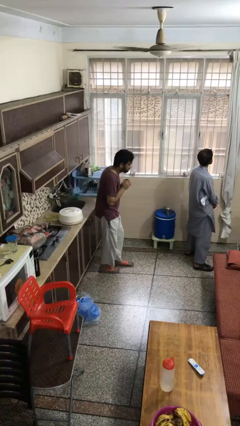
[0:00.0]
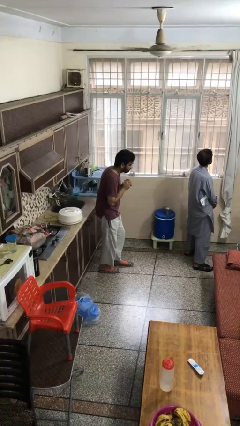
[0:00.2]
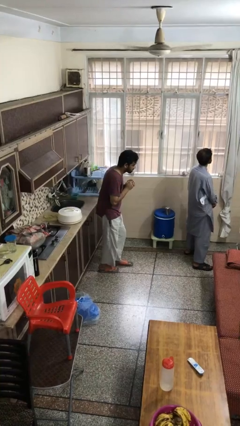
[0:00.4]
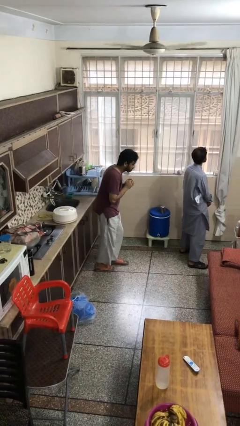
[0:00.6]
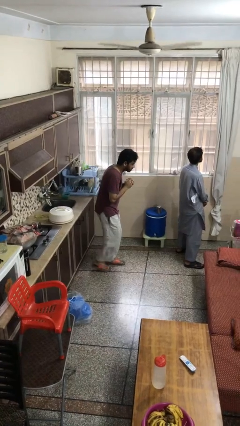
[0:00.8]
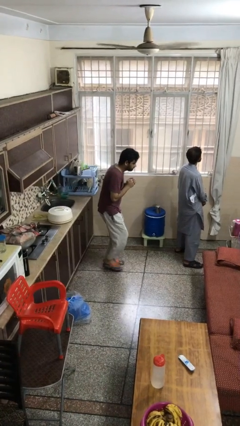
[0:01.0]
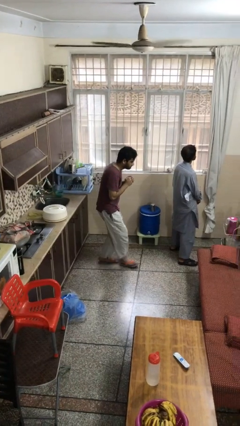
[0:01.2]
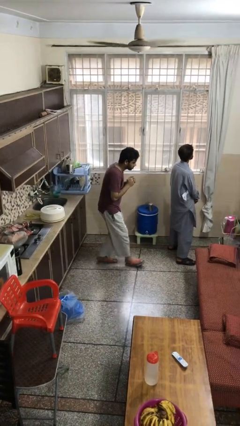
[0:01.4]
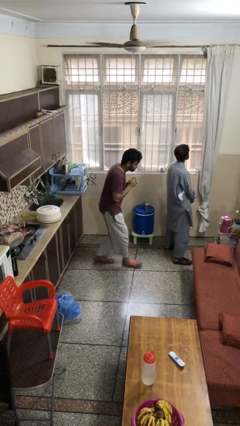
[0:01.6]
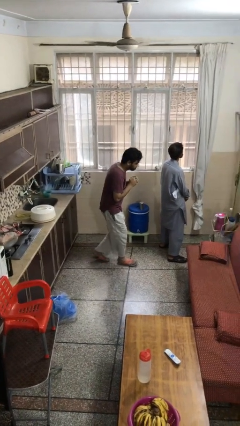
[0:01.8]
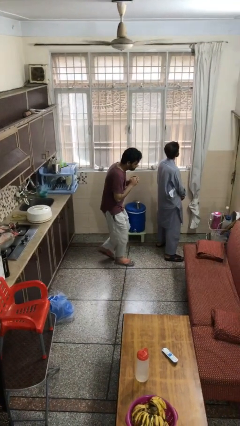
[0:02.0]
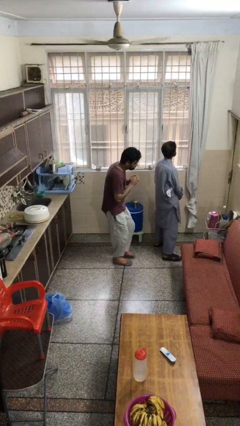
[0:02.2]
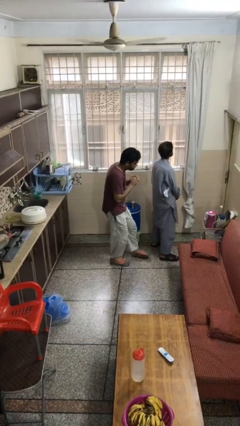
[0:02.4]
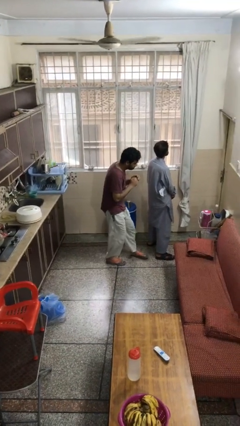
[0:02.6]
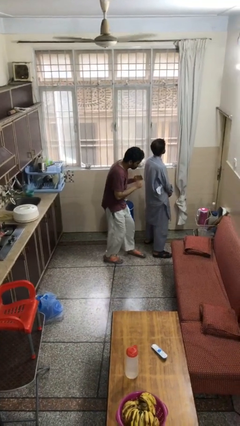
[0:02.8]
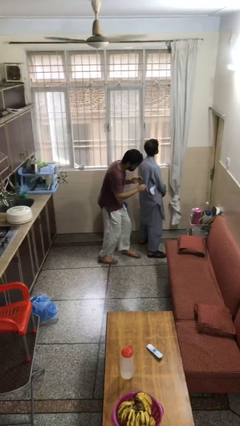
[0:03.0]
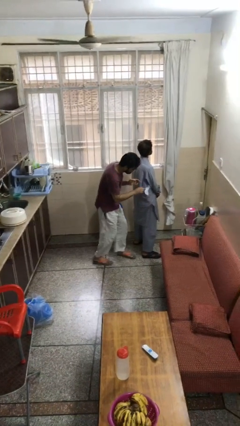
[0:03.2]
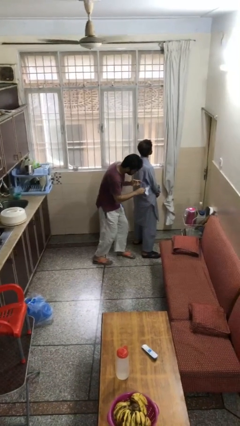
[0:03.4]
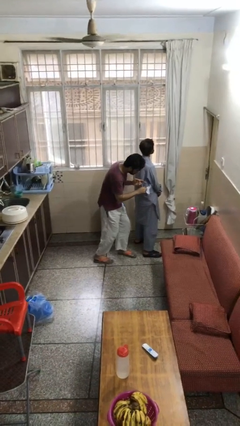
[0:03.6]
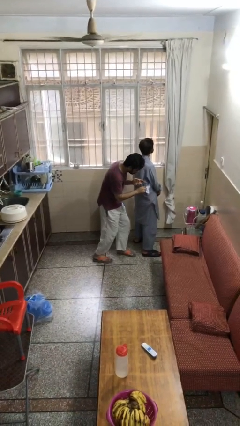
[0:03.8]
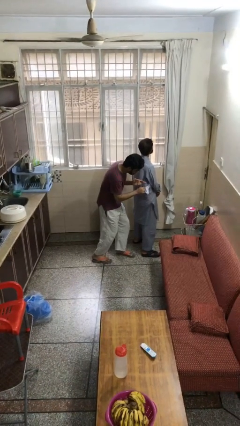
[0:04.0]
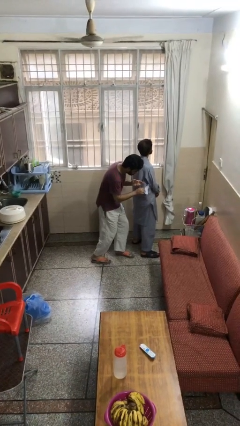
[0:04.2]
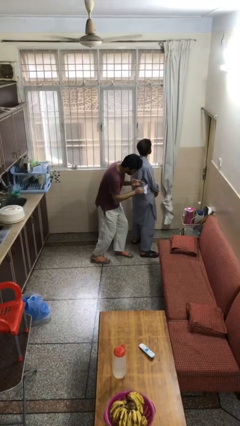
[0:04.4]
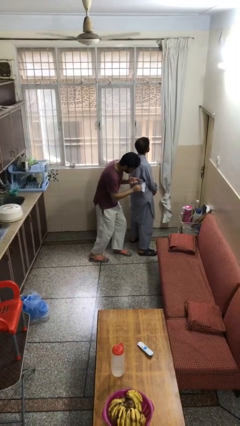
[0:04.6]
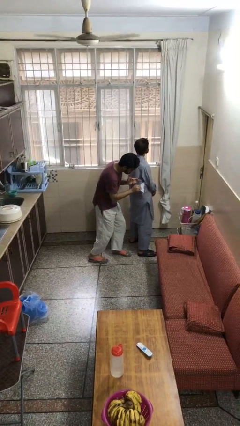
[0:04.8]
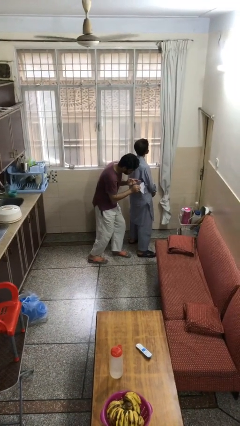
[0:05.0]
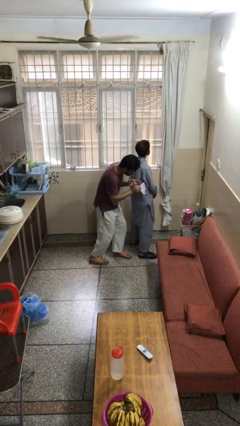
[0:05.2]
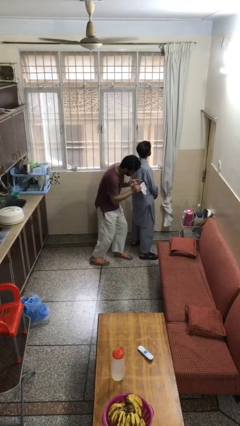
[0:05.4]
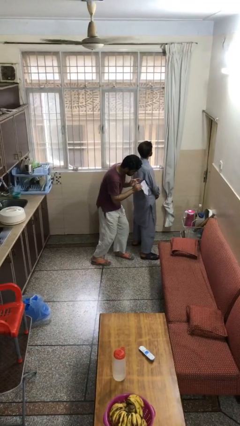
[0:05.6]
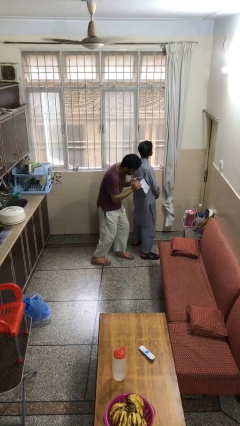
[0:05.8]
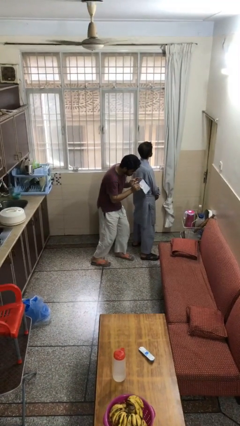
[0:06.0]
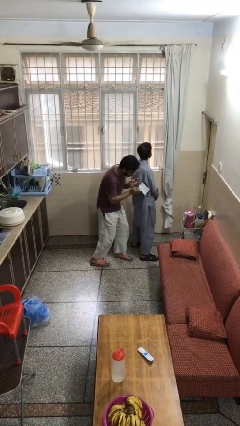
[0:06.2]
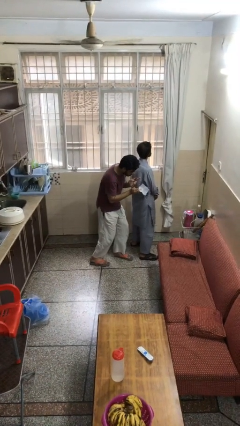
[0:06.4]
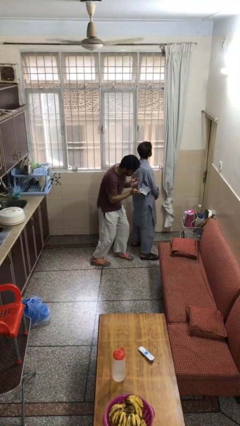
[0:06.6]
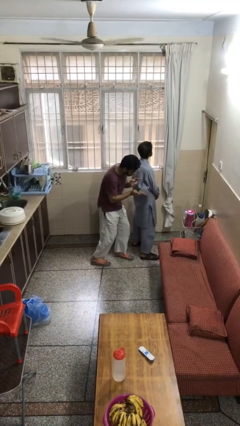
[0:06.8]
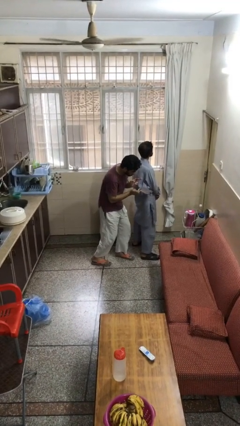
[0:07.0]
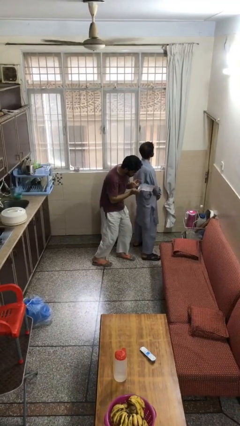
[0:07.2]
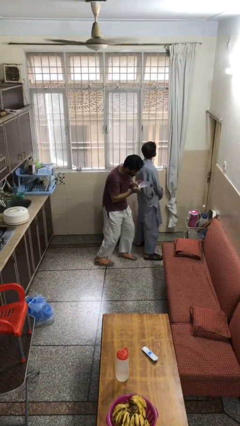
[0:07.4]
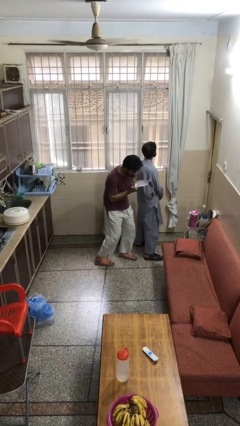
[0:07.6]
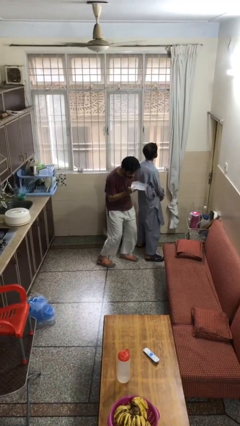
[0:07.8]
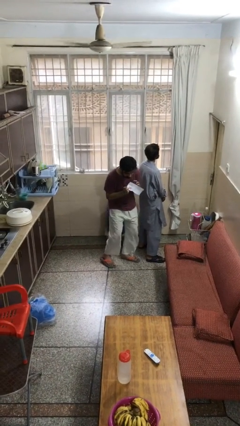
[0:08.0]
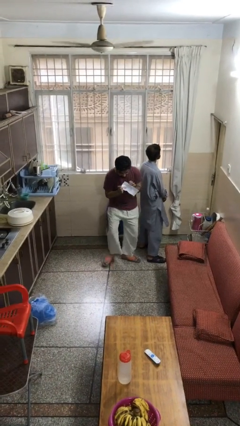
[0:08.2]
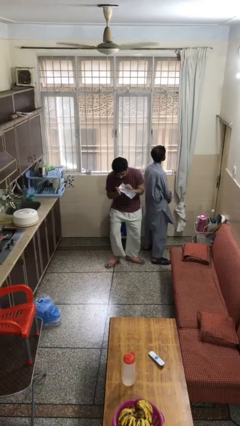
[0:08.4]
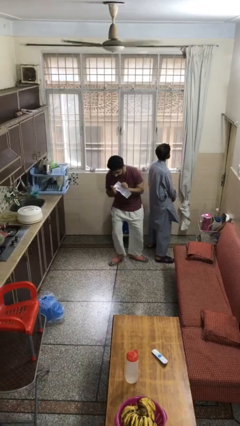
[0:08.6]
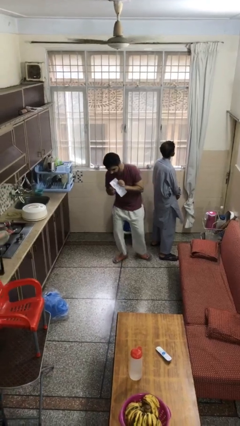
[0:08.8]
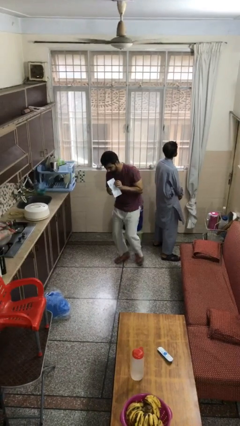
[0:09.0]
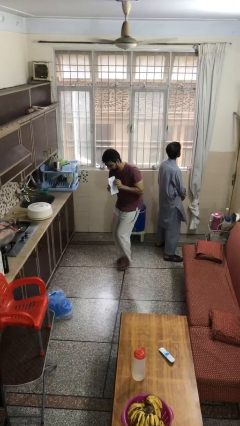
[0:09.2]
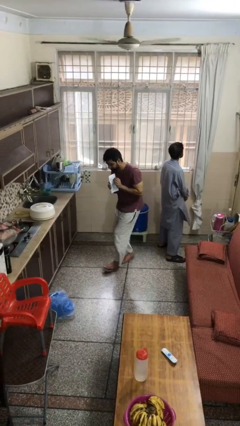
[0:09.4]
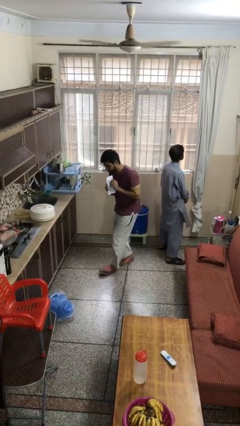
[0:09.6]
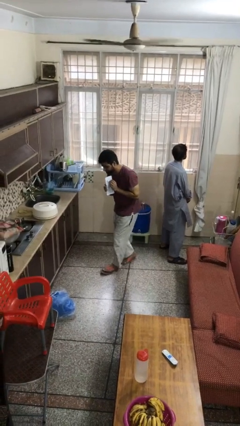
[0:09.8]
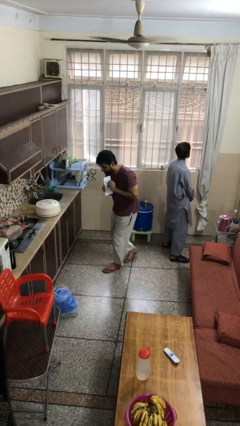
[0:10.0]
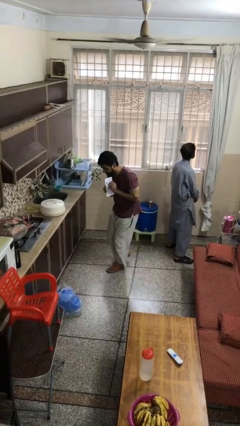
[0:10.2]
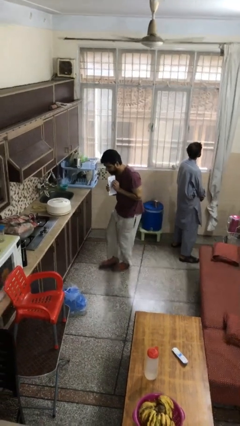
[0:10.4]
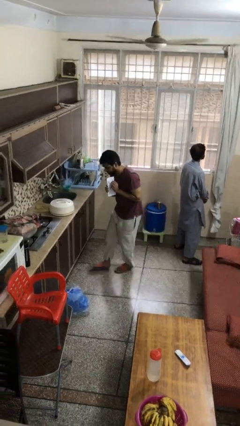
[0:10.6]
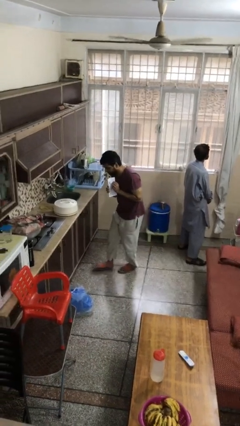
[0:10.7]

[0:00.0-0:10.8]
person steals object from person

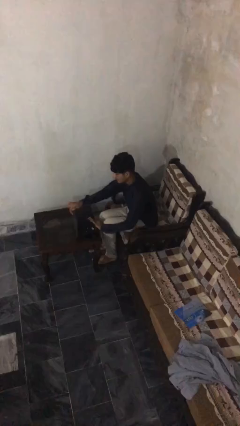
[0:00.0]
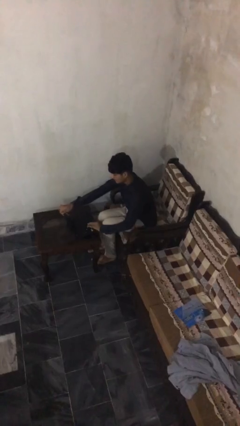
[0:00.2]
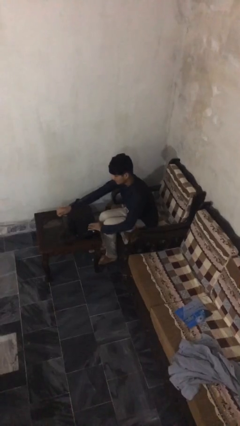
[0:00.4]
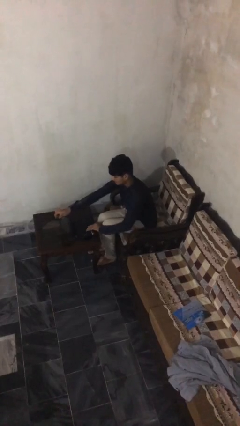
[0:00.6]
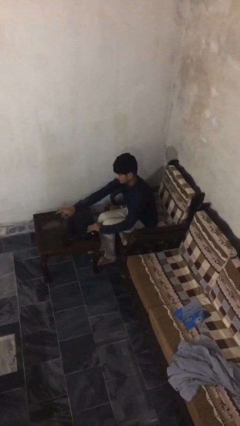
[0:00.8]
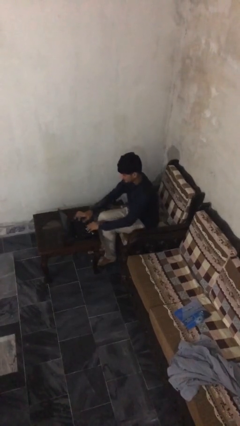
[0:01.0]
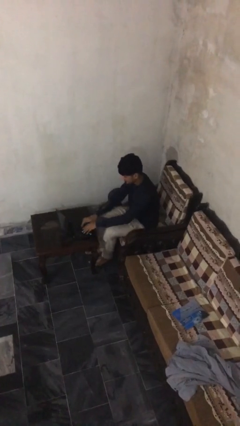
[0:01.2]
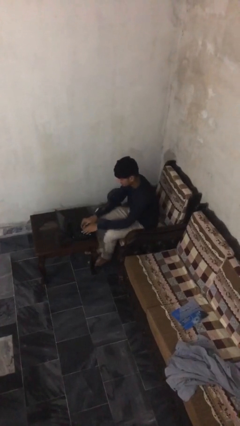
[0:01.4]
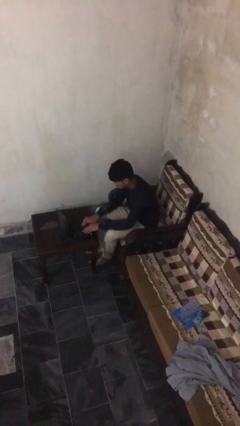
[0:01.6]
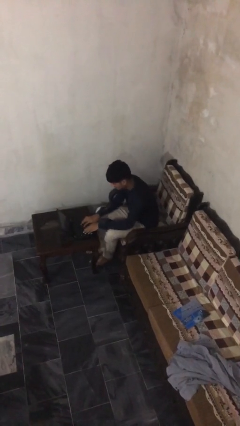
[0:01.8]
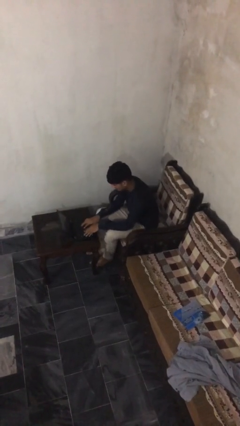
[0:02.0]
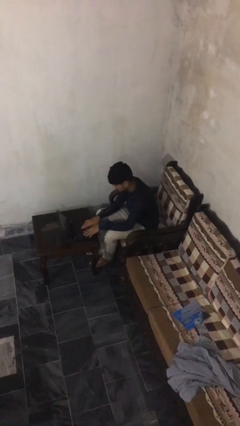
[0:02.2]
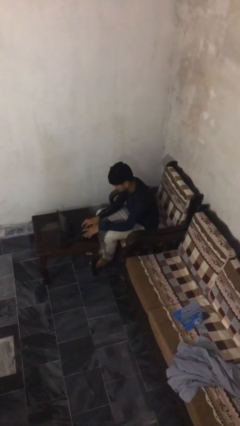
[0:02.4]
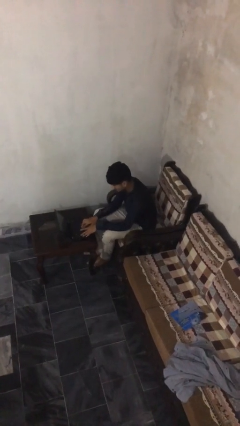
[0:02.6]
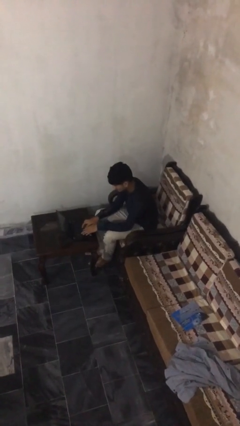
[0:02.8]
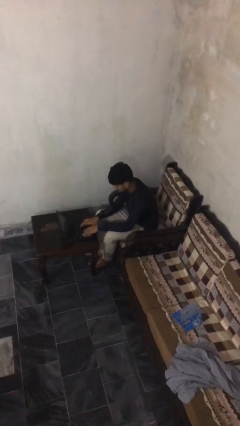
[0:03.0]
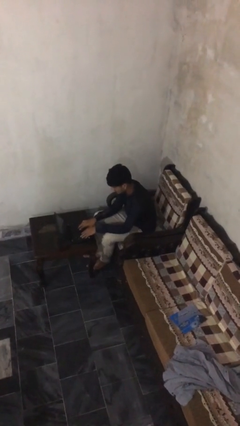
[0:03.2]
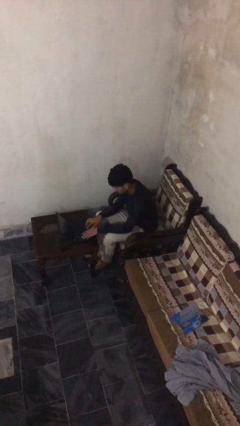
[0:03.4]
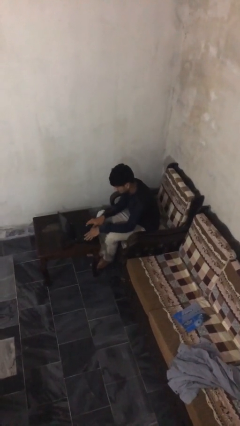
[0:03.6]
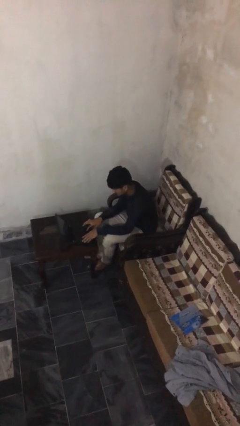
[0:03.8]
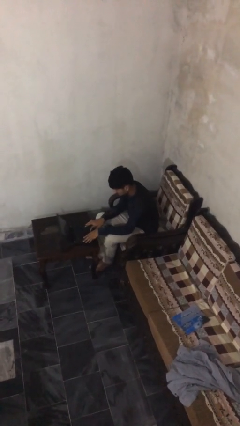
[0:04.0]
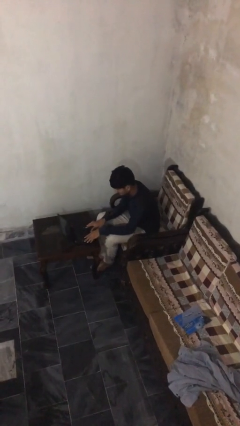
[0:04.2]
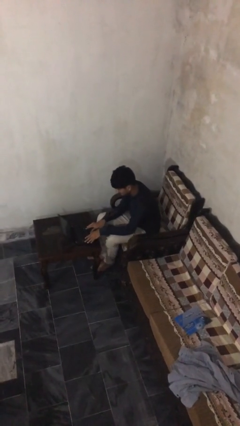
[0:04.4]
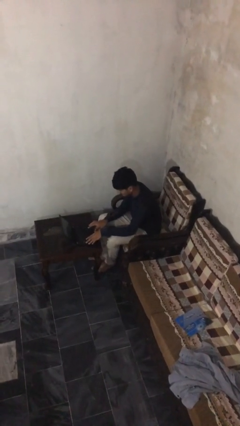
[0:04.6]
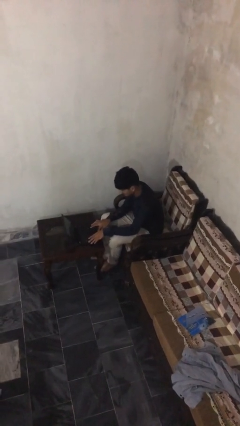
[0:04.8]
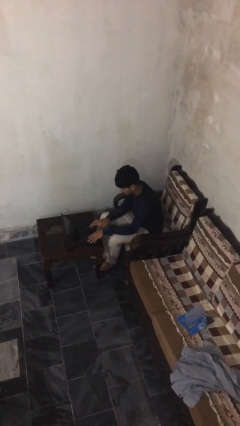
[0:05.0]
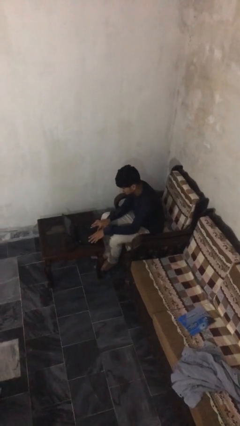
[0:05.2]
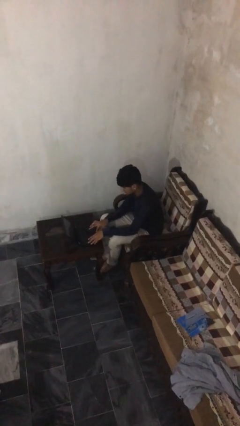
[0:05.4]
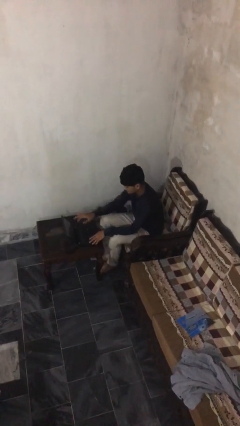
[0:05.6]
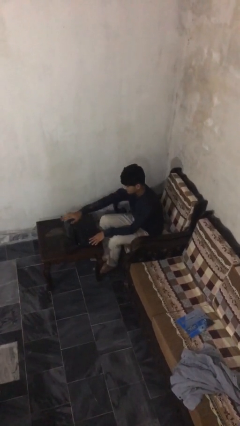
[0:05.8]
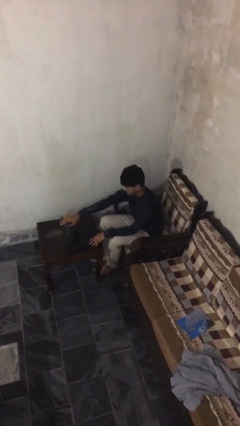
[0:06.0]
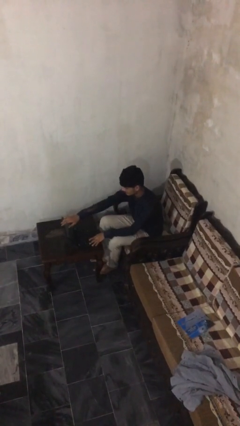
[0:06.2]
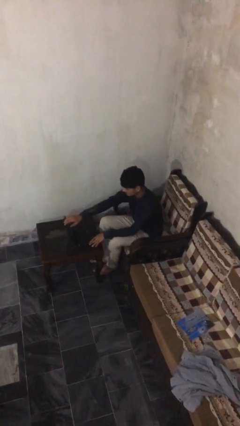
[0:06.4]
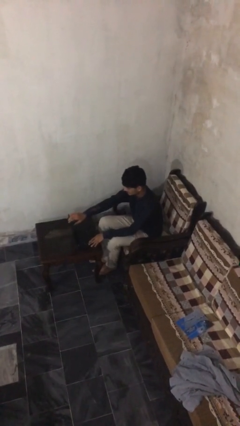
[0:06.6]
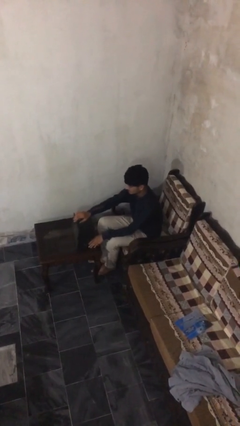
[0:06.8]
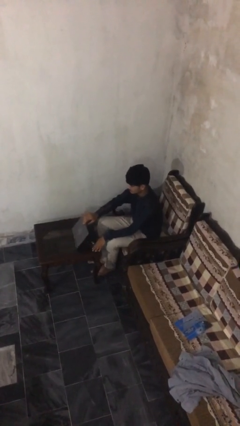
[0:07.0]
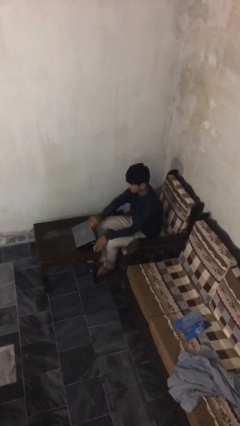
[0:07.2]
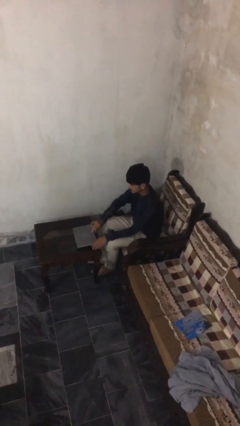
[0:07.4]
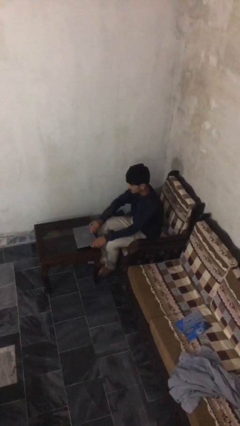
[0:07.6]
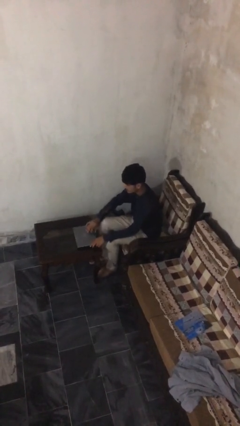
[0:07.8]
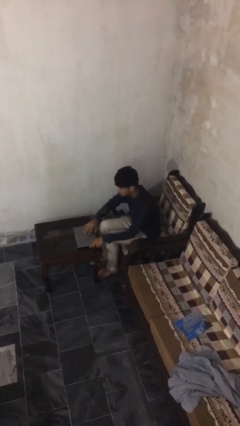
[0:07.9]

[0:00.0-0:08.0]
person interacts with laptop
